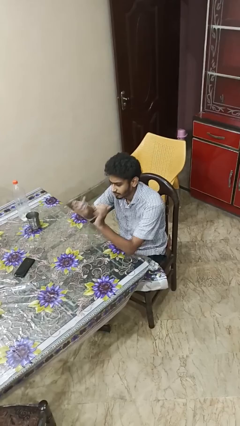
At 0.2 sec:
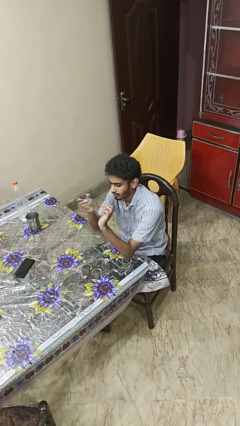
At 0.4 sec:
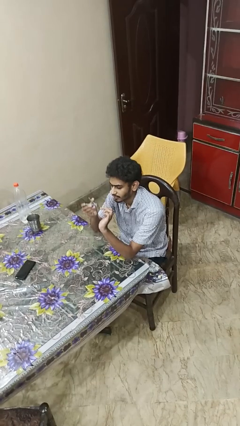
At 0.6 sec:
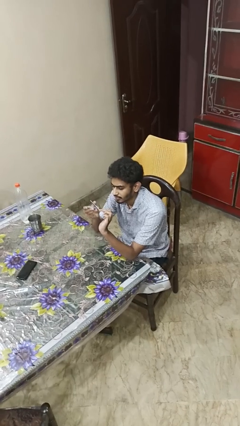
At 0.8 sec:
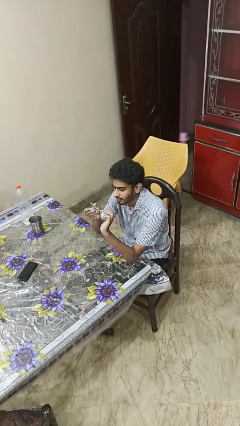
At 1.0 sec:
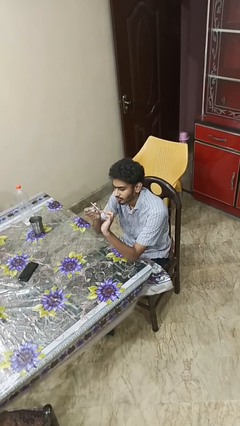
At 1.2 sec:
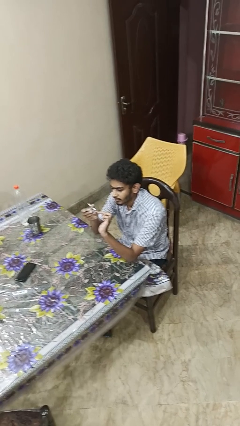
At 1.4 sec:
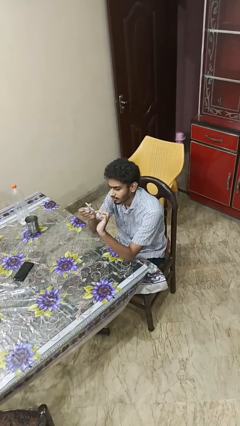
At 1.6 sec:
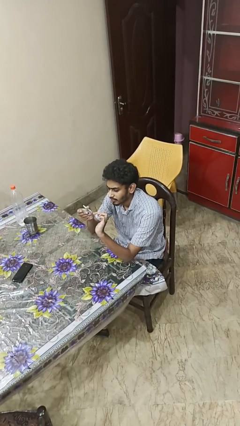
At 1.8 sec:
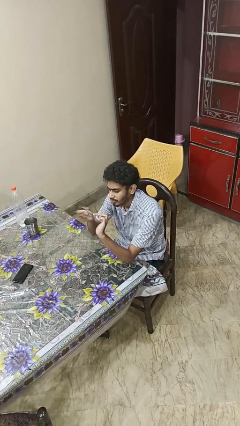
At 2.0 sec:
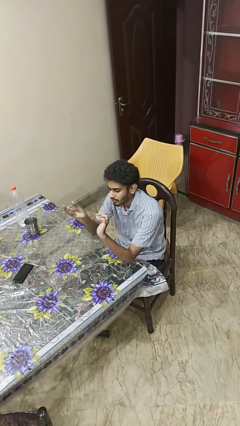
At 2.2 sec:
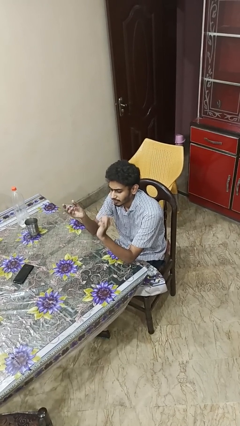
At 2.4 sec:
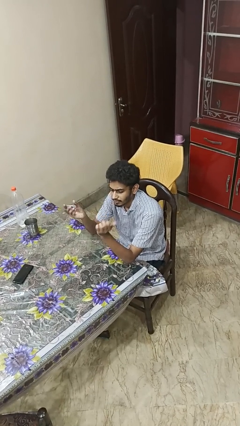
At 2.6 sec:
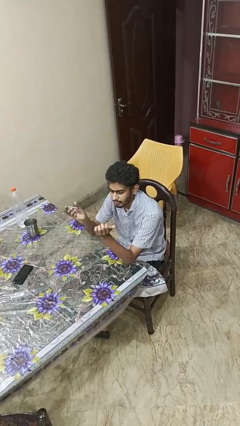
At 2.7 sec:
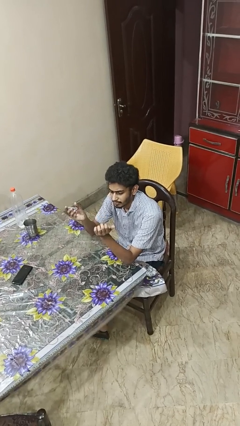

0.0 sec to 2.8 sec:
person clips fingernails

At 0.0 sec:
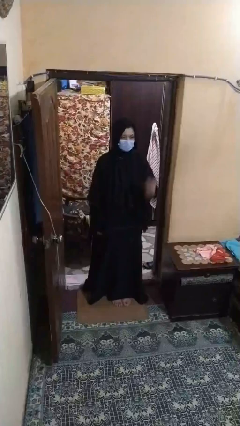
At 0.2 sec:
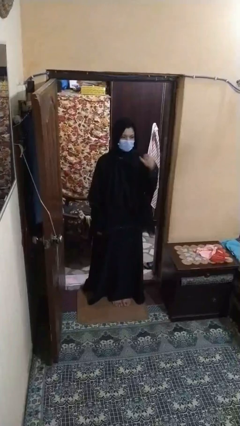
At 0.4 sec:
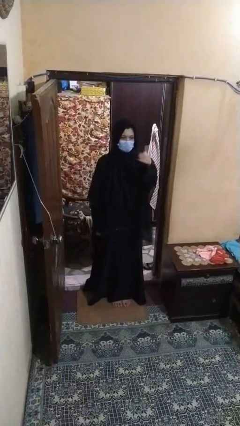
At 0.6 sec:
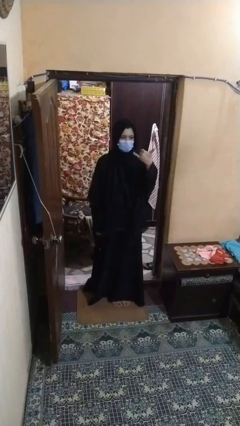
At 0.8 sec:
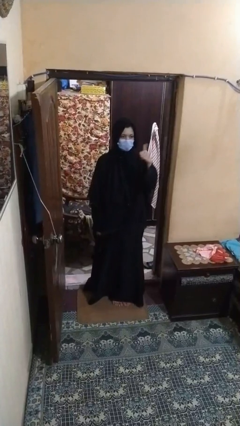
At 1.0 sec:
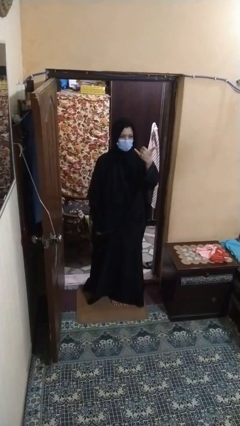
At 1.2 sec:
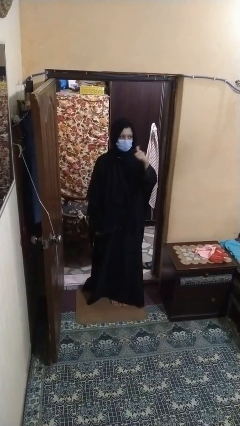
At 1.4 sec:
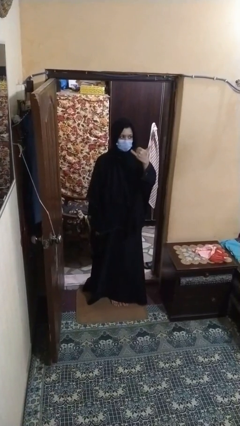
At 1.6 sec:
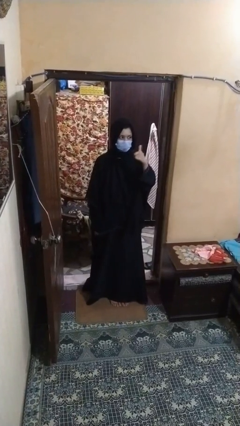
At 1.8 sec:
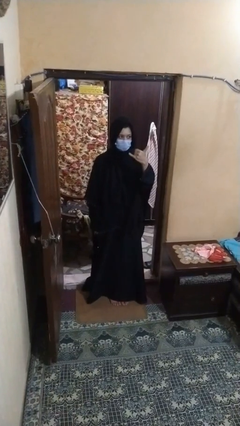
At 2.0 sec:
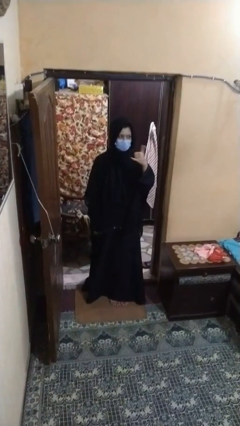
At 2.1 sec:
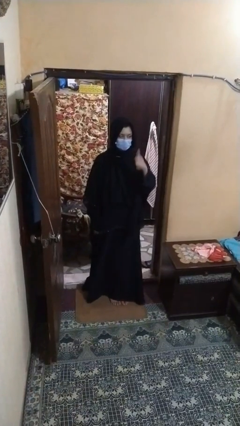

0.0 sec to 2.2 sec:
person gestures hang loose

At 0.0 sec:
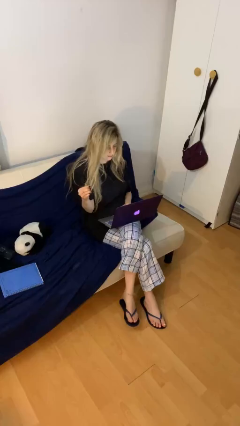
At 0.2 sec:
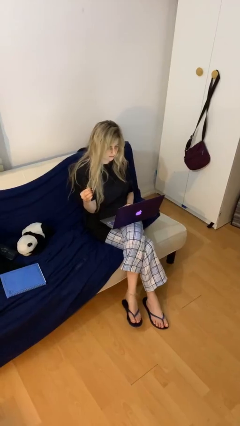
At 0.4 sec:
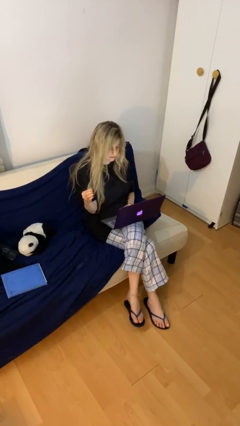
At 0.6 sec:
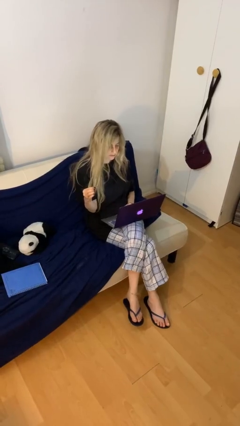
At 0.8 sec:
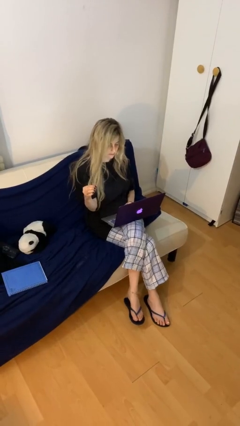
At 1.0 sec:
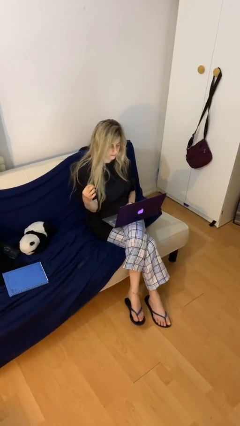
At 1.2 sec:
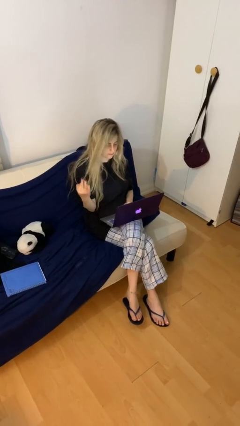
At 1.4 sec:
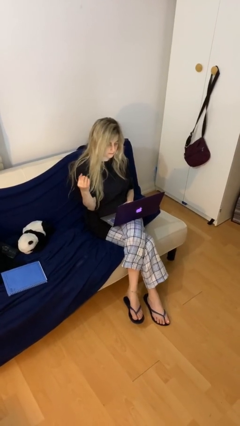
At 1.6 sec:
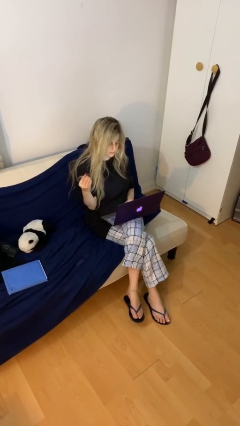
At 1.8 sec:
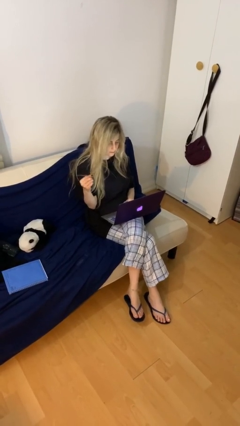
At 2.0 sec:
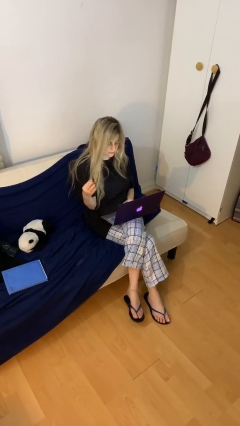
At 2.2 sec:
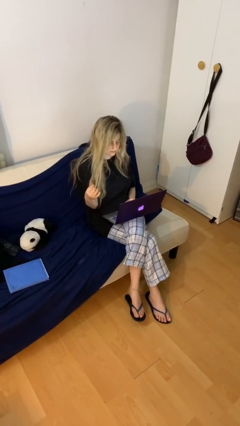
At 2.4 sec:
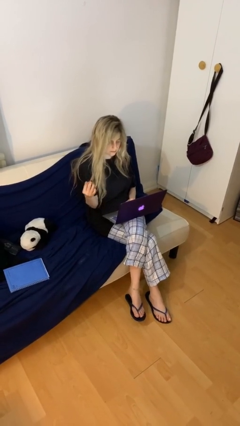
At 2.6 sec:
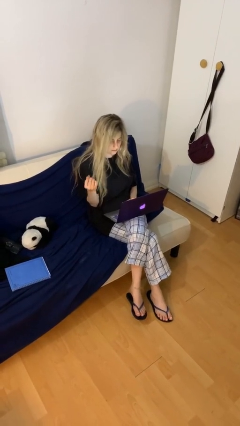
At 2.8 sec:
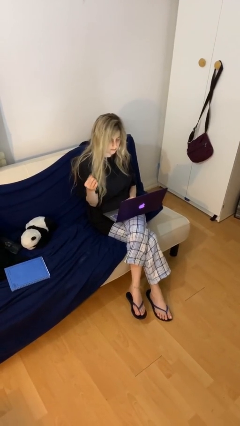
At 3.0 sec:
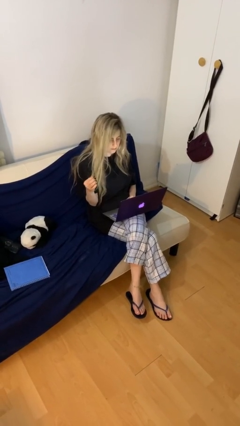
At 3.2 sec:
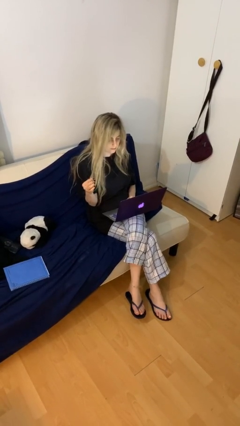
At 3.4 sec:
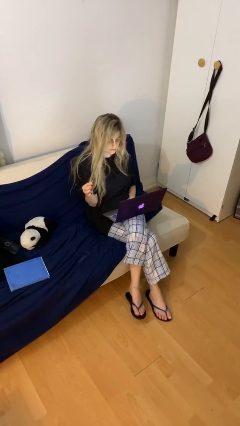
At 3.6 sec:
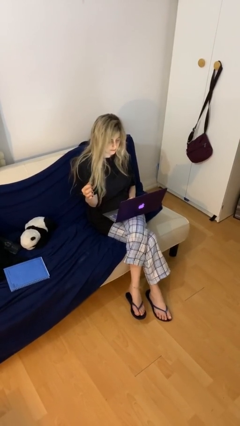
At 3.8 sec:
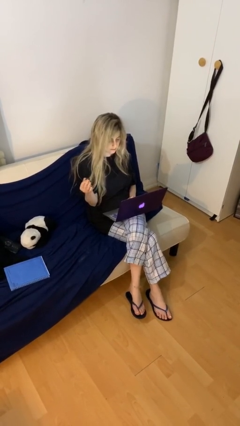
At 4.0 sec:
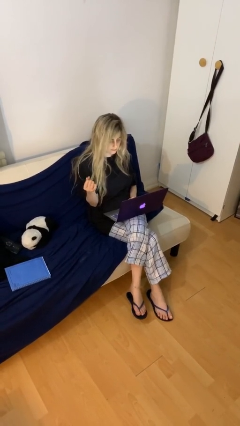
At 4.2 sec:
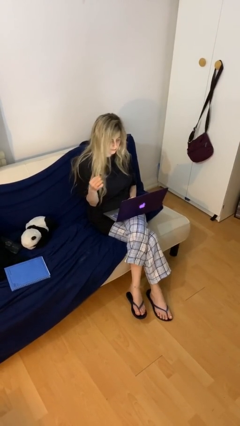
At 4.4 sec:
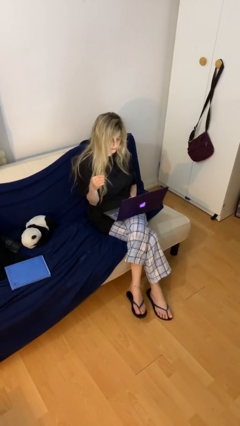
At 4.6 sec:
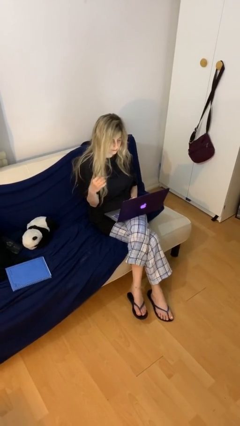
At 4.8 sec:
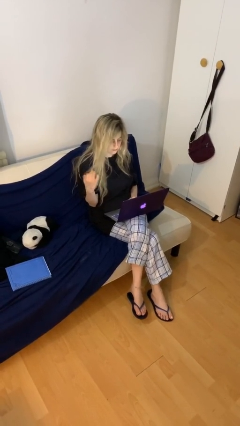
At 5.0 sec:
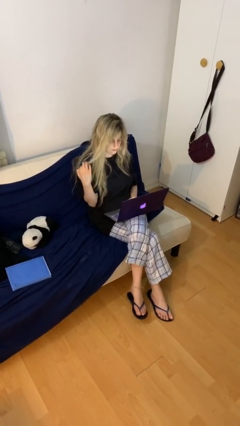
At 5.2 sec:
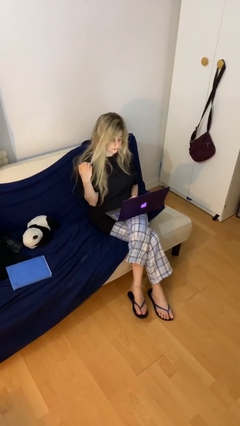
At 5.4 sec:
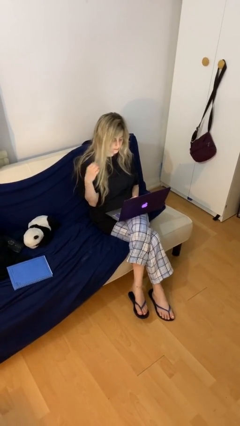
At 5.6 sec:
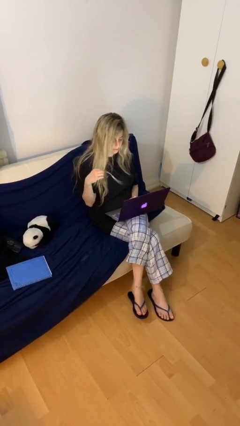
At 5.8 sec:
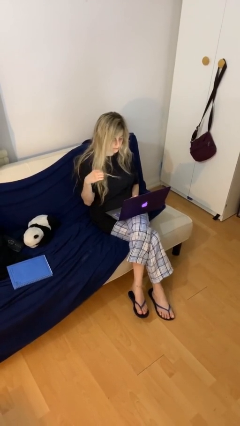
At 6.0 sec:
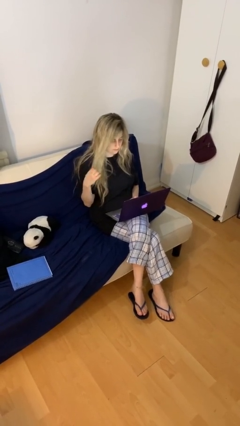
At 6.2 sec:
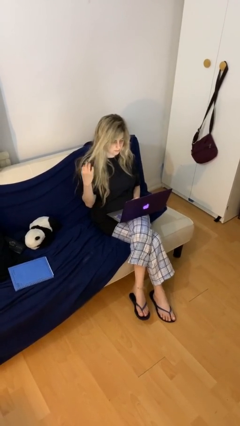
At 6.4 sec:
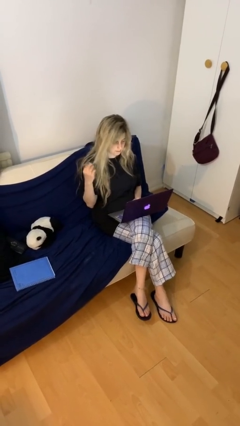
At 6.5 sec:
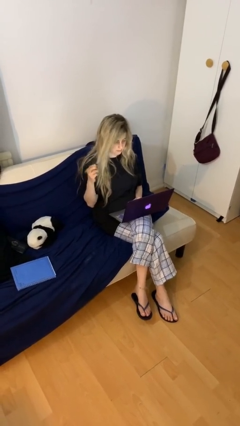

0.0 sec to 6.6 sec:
person interacts with laptop

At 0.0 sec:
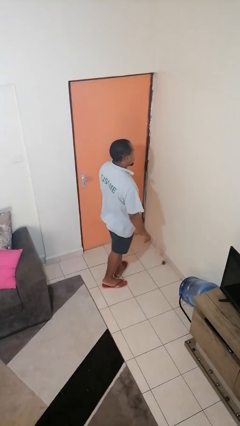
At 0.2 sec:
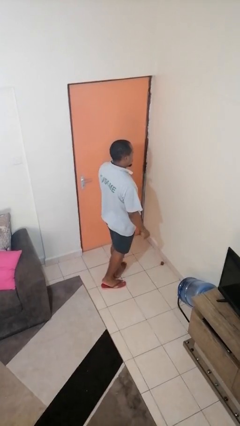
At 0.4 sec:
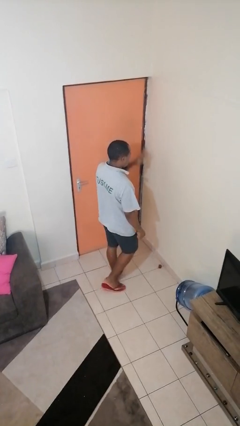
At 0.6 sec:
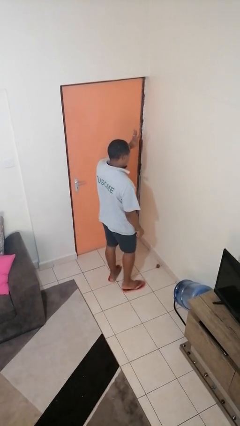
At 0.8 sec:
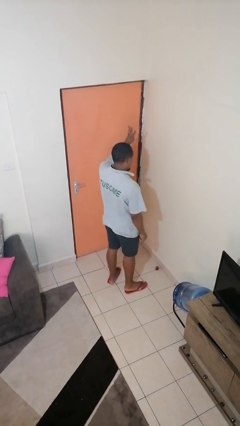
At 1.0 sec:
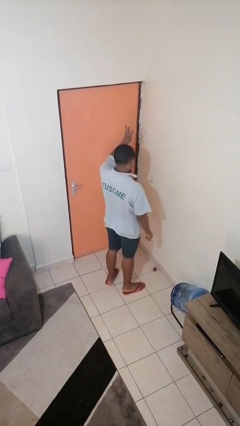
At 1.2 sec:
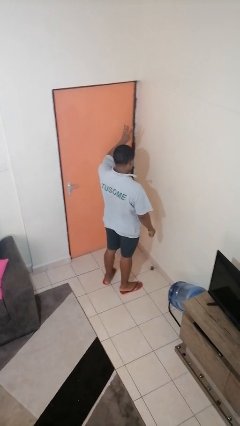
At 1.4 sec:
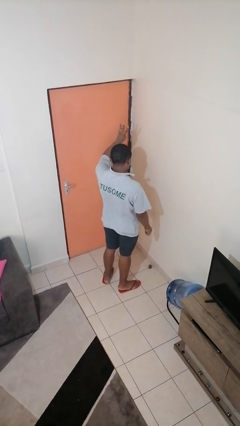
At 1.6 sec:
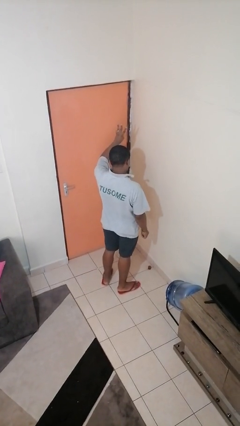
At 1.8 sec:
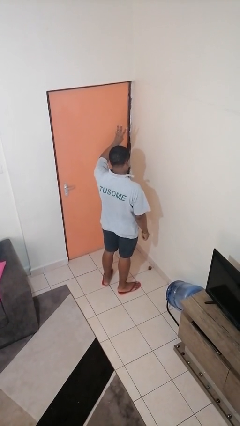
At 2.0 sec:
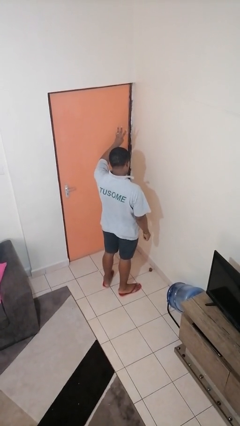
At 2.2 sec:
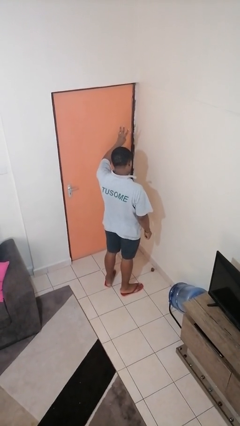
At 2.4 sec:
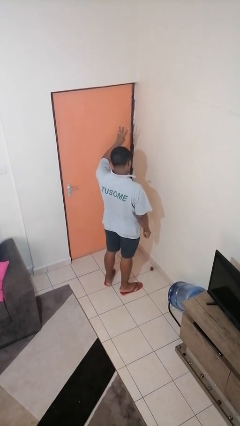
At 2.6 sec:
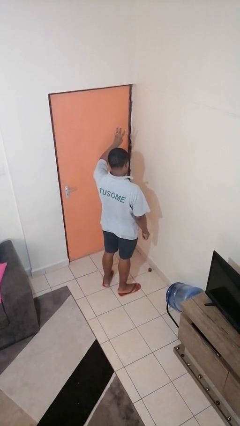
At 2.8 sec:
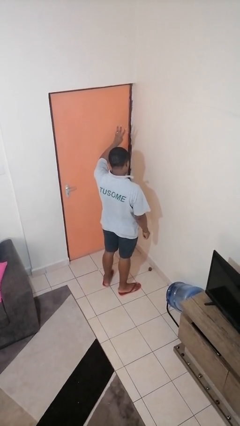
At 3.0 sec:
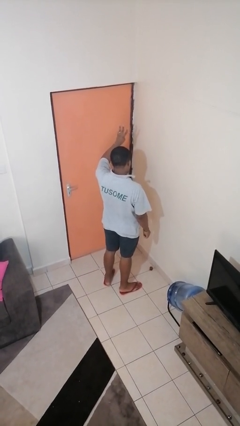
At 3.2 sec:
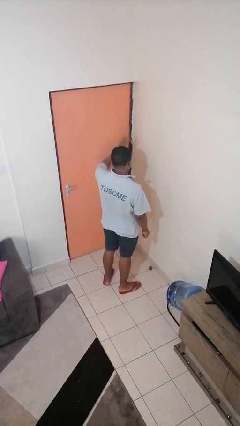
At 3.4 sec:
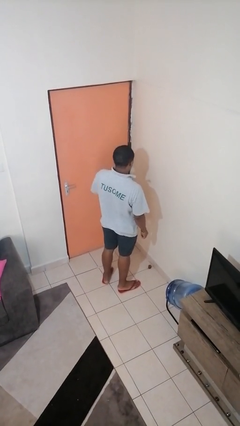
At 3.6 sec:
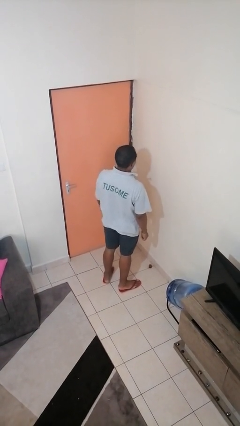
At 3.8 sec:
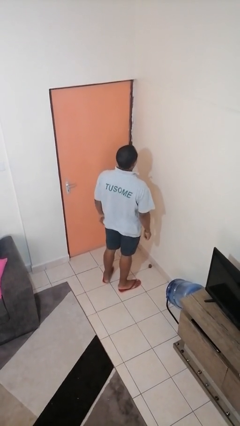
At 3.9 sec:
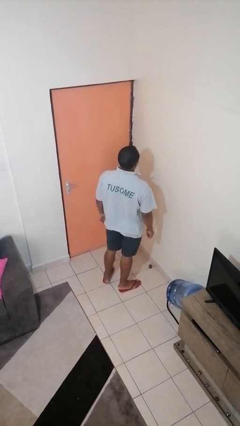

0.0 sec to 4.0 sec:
person gestures number three

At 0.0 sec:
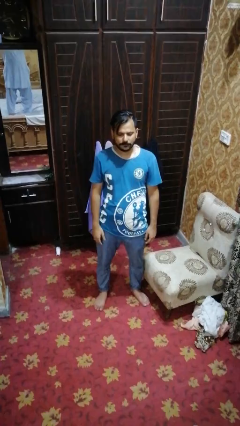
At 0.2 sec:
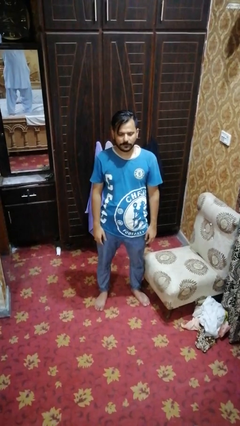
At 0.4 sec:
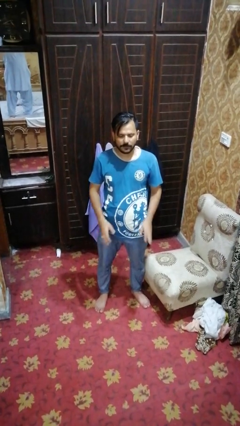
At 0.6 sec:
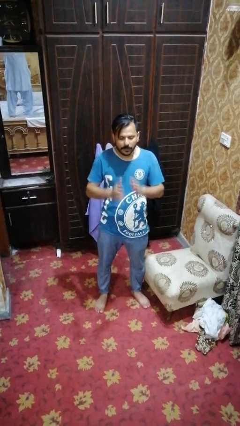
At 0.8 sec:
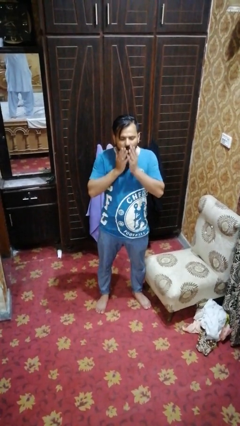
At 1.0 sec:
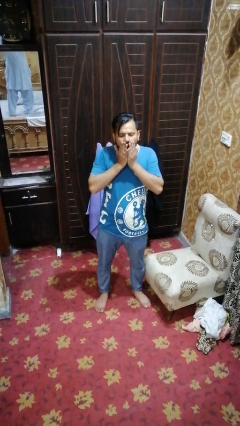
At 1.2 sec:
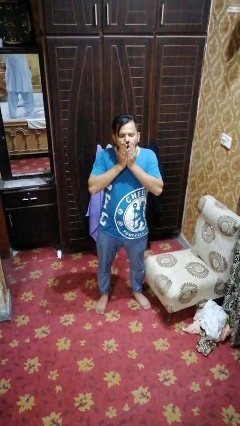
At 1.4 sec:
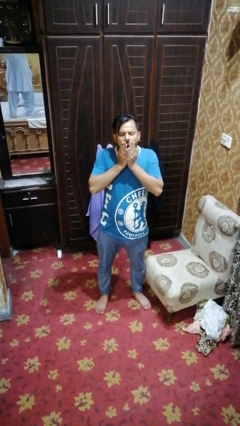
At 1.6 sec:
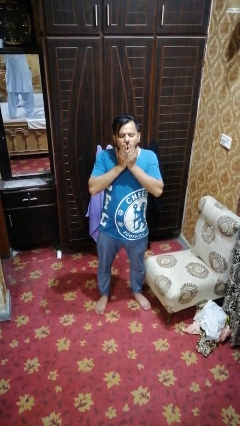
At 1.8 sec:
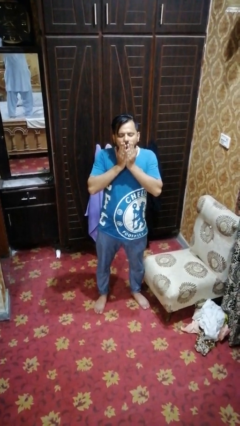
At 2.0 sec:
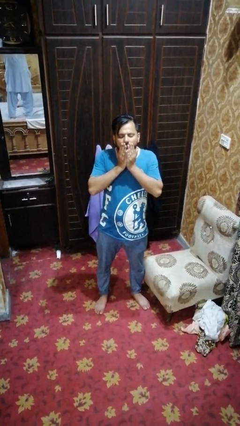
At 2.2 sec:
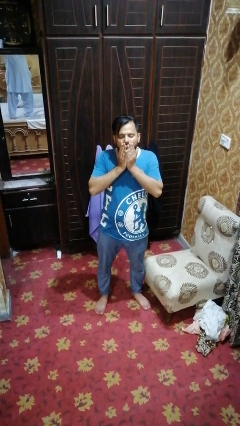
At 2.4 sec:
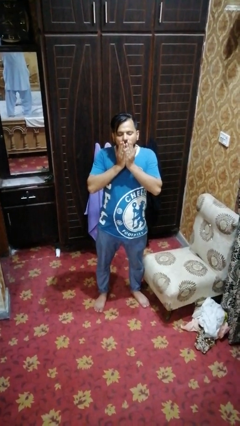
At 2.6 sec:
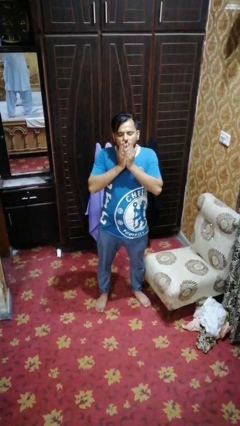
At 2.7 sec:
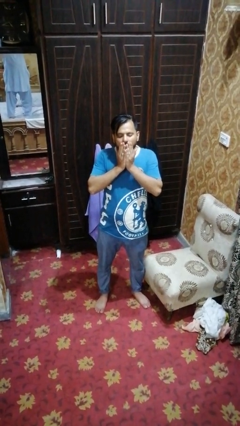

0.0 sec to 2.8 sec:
person yawns
